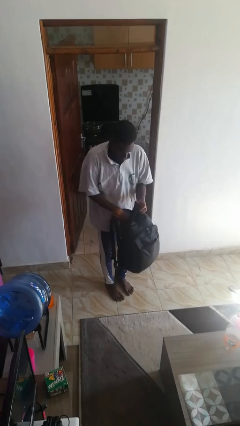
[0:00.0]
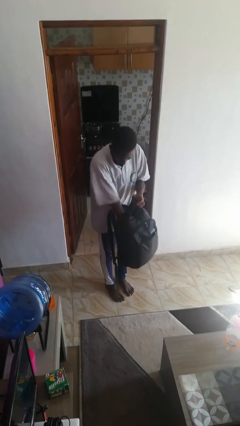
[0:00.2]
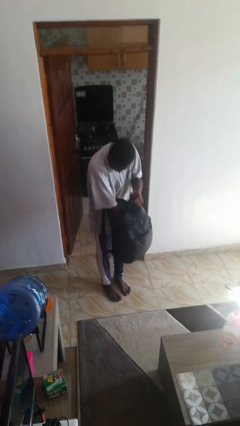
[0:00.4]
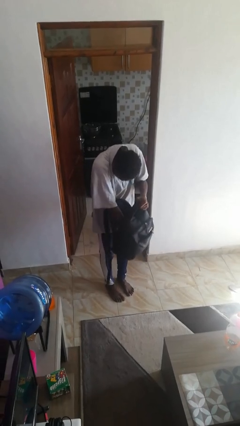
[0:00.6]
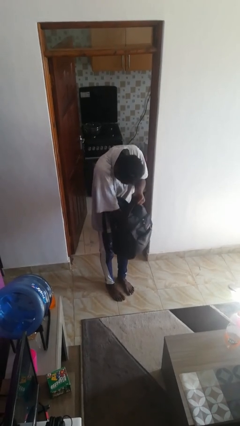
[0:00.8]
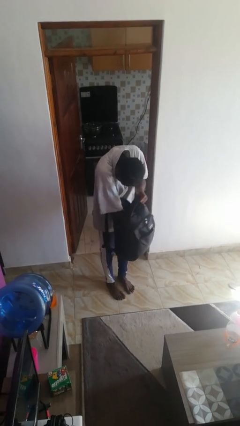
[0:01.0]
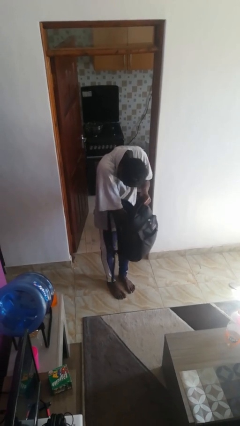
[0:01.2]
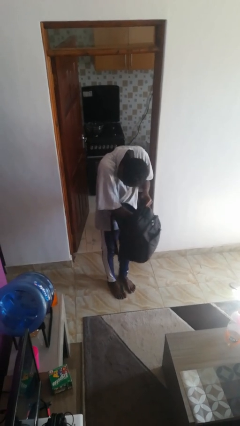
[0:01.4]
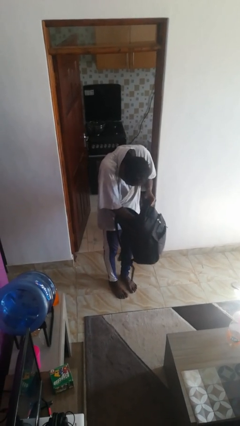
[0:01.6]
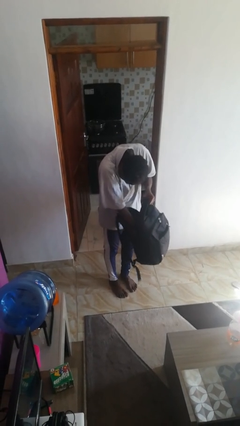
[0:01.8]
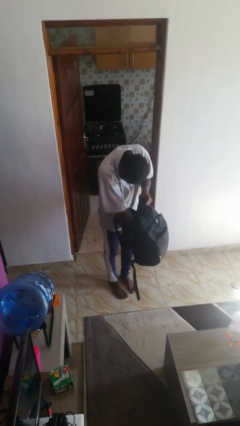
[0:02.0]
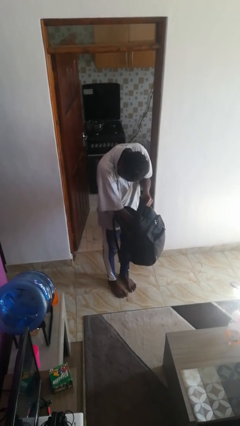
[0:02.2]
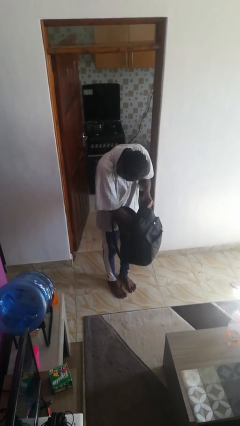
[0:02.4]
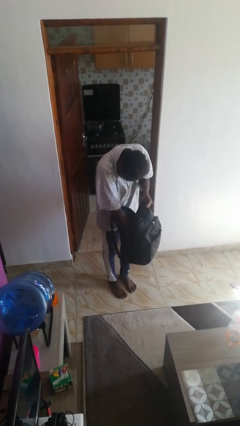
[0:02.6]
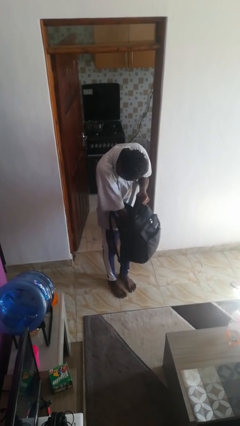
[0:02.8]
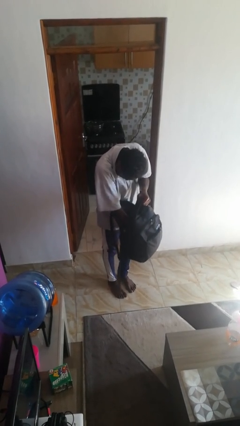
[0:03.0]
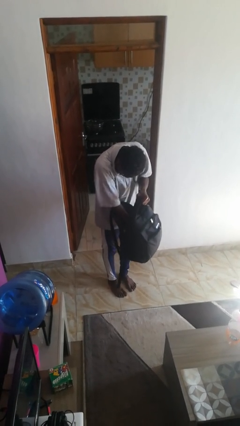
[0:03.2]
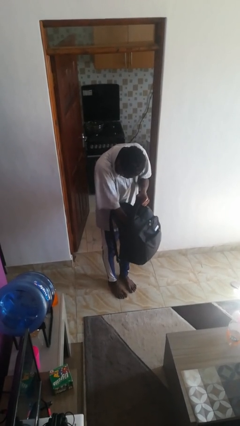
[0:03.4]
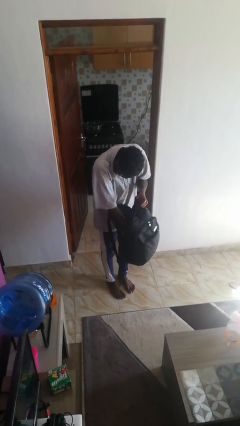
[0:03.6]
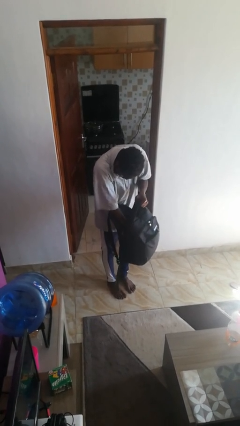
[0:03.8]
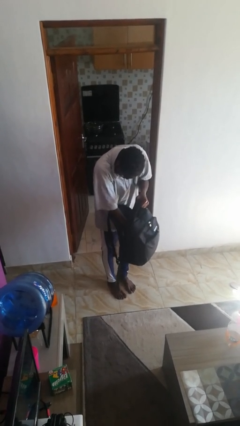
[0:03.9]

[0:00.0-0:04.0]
person searches in backpack

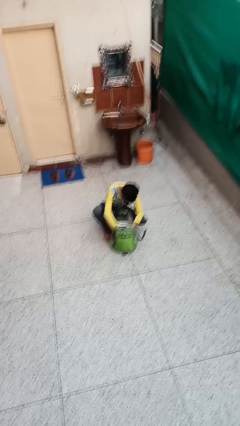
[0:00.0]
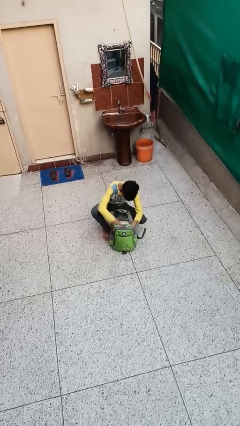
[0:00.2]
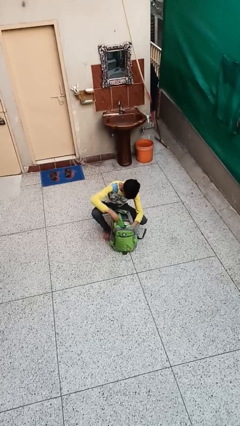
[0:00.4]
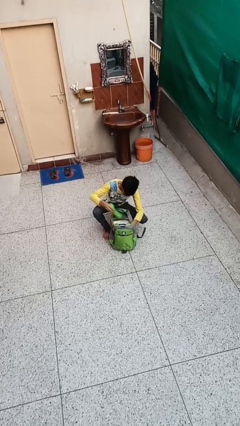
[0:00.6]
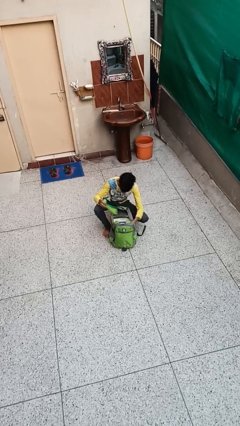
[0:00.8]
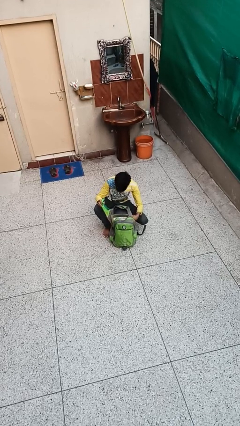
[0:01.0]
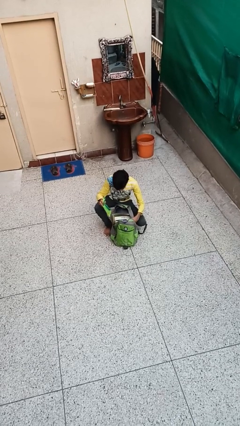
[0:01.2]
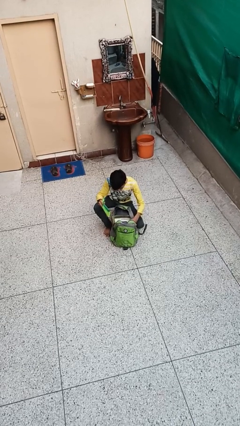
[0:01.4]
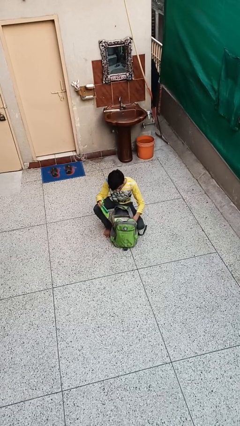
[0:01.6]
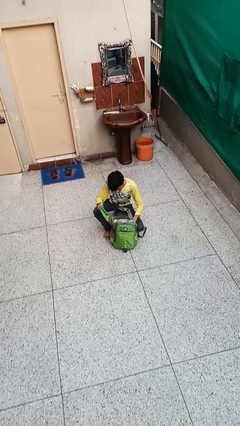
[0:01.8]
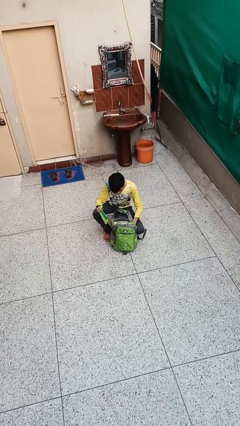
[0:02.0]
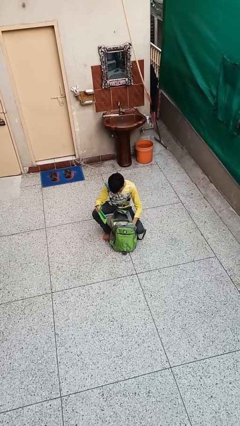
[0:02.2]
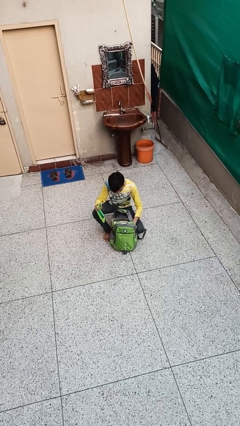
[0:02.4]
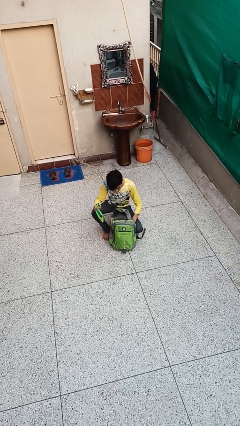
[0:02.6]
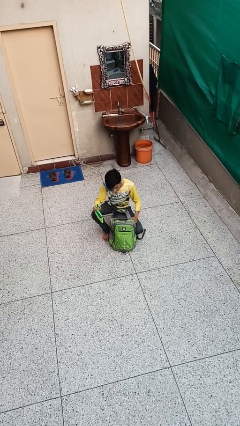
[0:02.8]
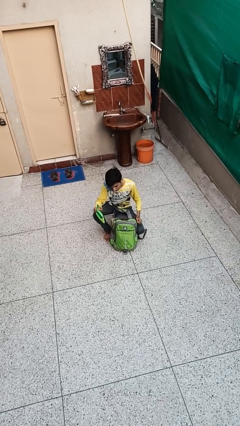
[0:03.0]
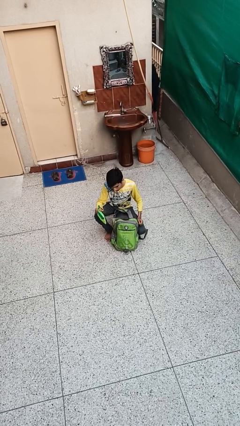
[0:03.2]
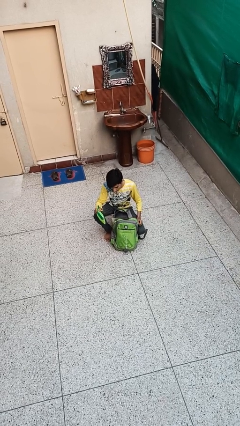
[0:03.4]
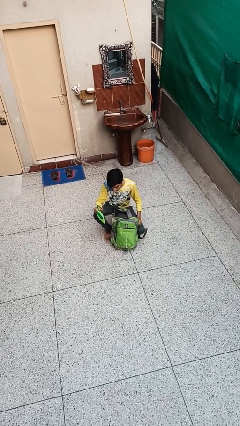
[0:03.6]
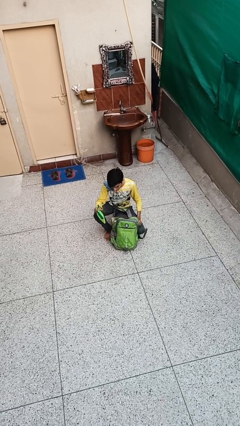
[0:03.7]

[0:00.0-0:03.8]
person takes object from backpack

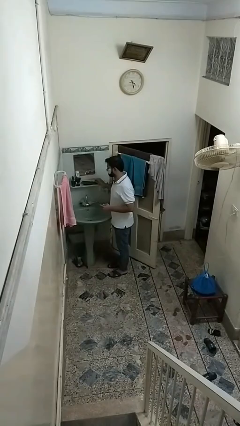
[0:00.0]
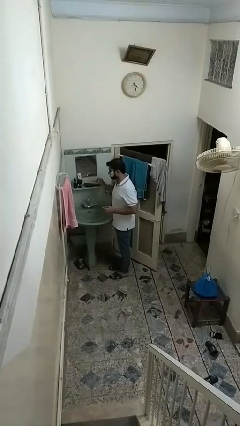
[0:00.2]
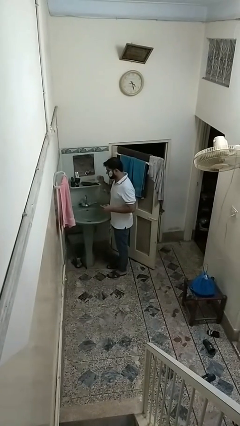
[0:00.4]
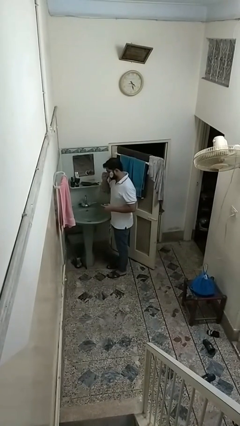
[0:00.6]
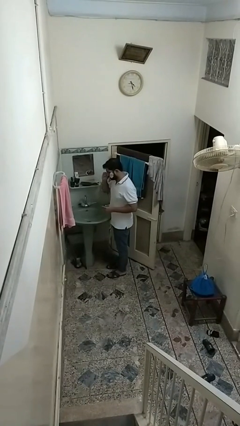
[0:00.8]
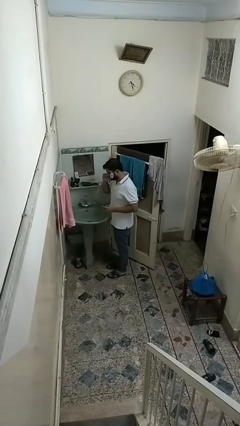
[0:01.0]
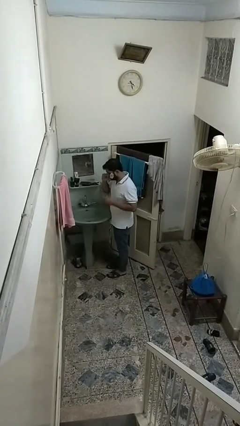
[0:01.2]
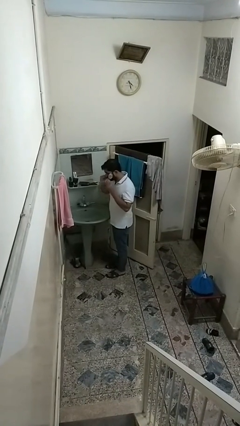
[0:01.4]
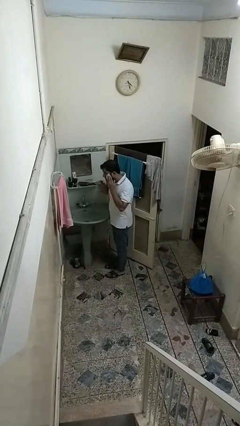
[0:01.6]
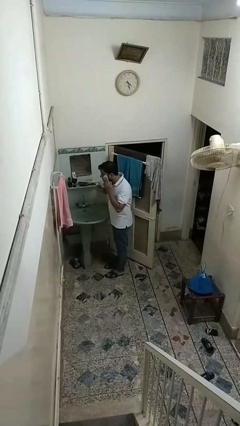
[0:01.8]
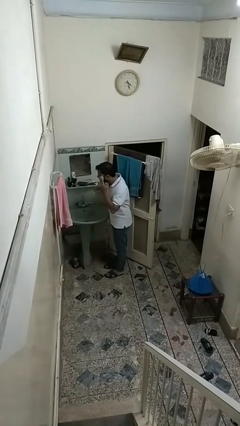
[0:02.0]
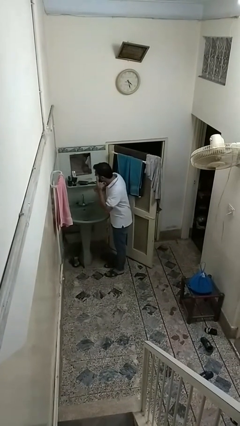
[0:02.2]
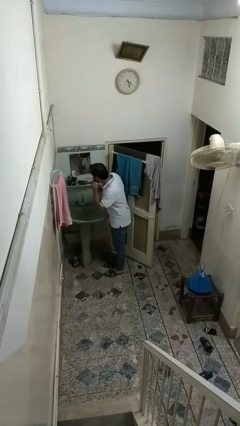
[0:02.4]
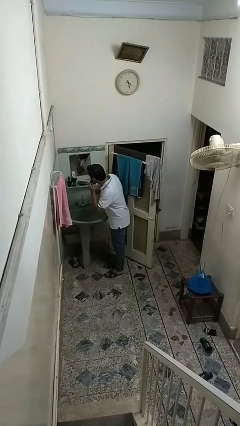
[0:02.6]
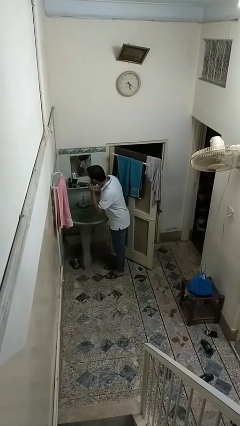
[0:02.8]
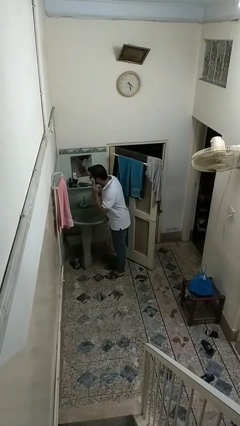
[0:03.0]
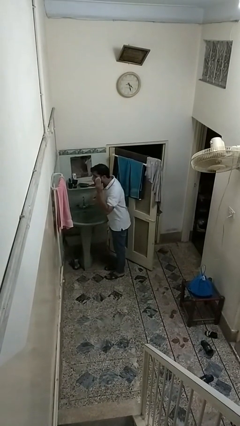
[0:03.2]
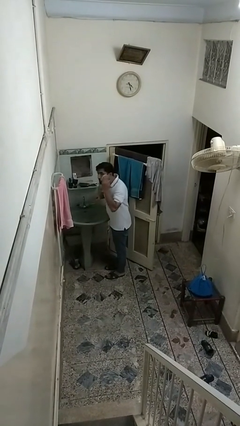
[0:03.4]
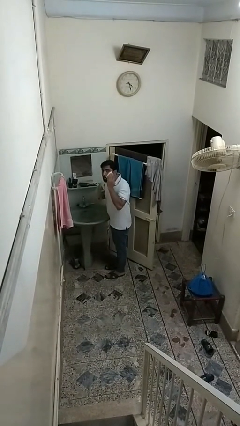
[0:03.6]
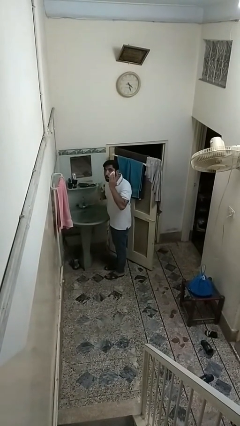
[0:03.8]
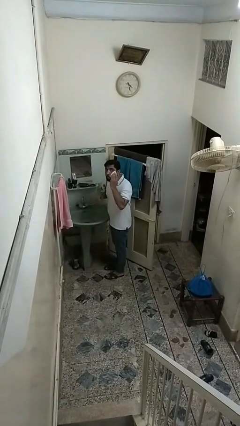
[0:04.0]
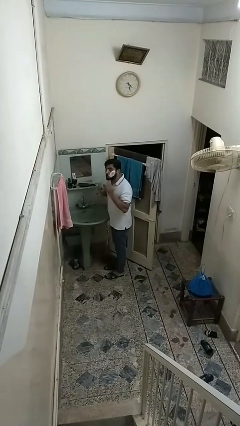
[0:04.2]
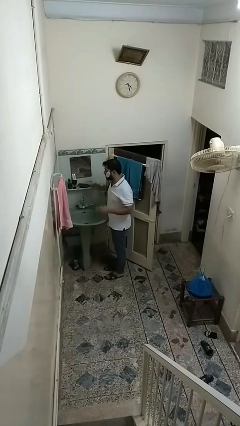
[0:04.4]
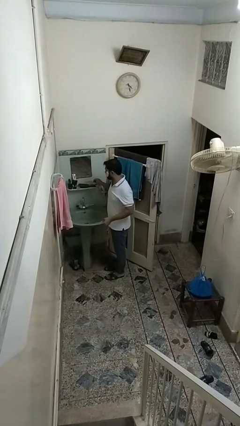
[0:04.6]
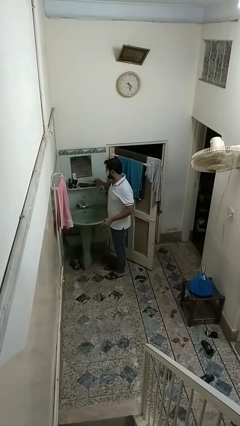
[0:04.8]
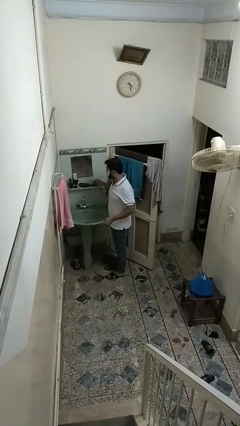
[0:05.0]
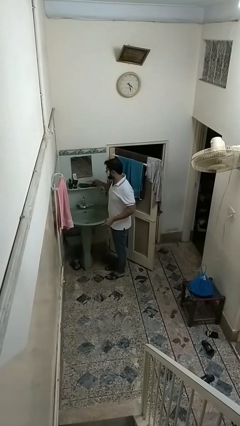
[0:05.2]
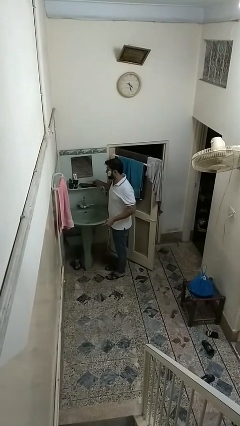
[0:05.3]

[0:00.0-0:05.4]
person applies shaving cream

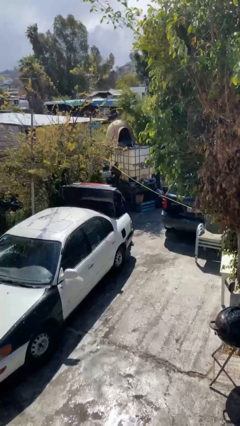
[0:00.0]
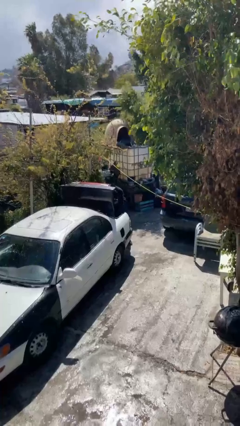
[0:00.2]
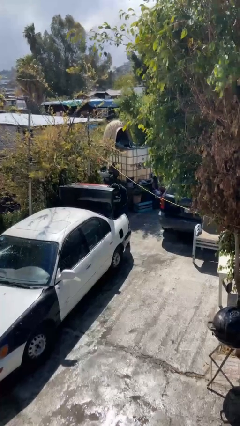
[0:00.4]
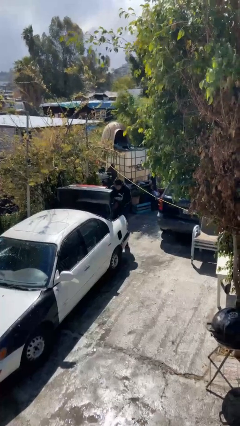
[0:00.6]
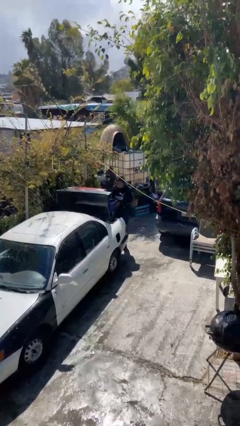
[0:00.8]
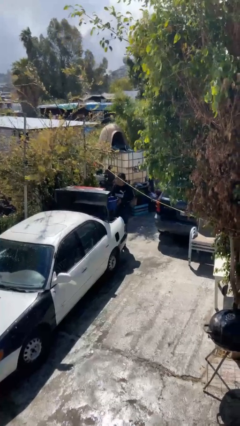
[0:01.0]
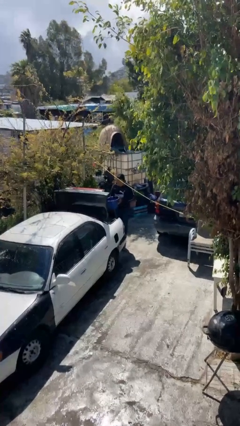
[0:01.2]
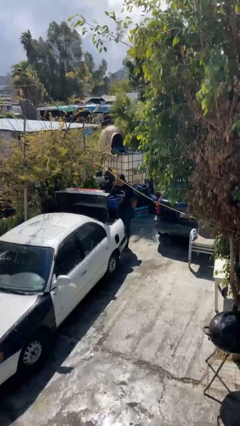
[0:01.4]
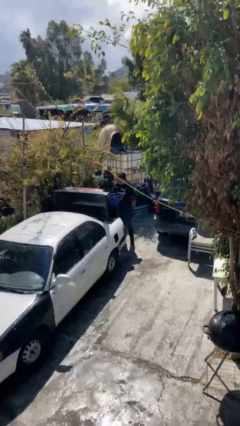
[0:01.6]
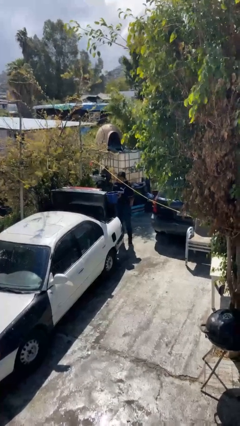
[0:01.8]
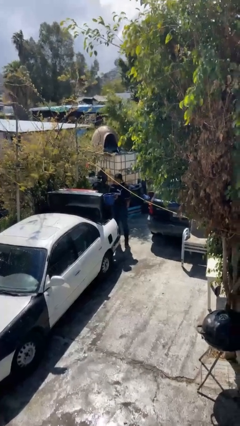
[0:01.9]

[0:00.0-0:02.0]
person unloads car

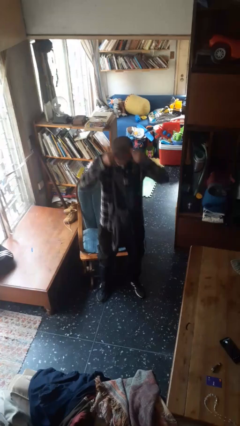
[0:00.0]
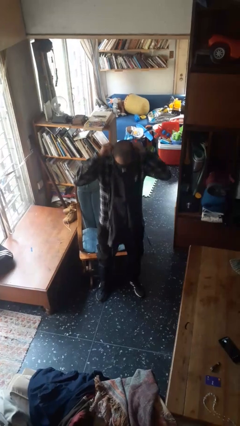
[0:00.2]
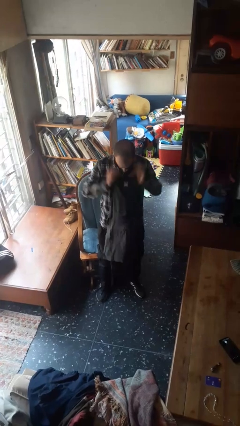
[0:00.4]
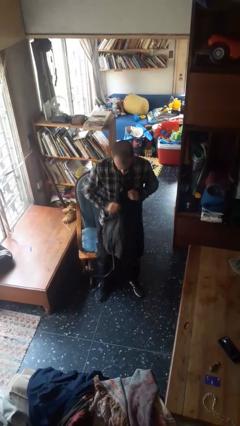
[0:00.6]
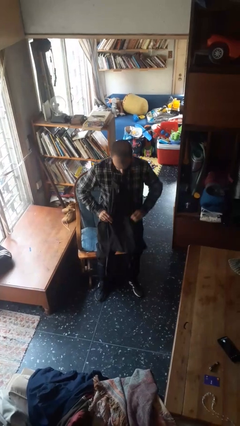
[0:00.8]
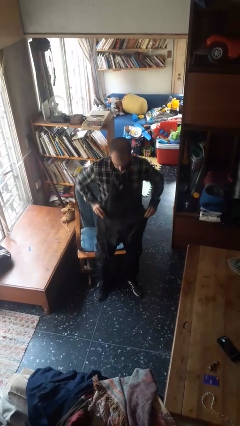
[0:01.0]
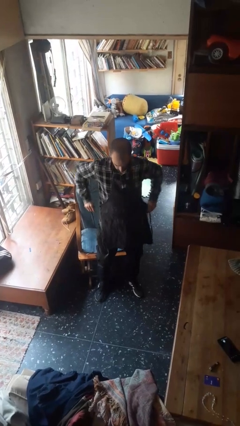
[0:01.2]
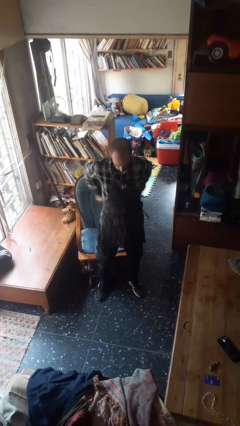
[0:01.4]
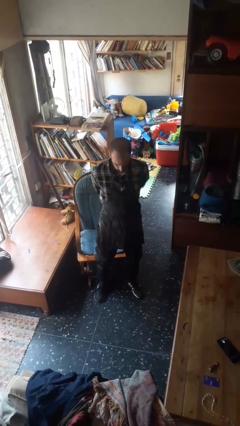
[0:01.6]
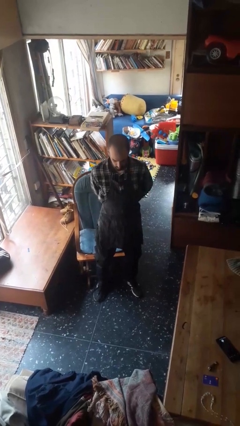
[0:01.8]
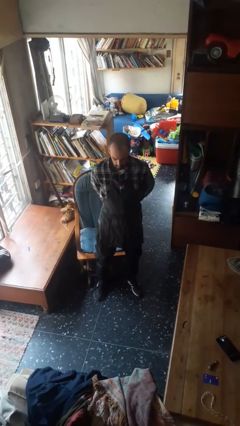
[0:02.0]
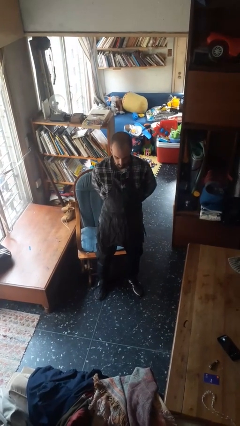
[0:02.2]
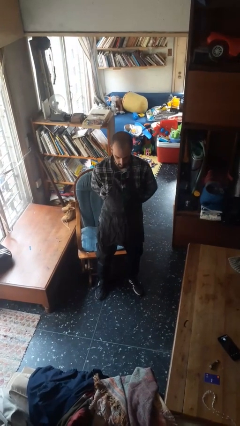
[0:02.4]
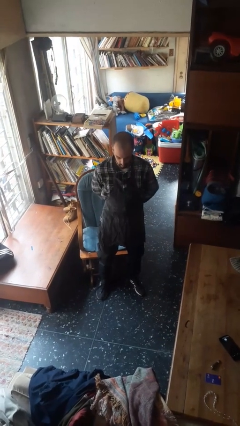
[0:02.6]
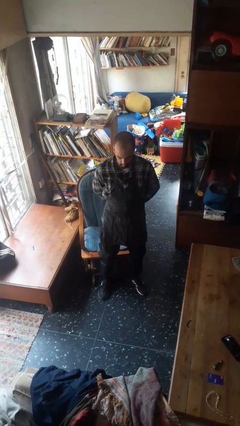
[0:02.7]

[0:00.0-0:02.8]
person puts on apron
